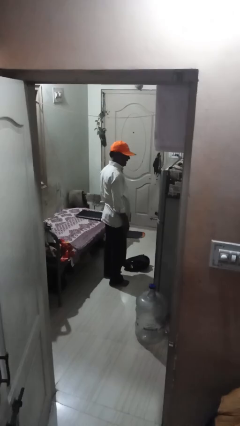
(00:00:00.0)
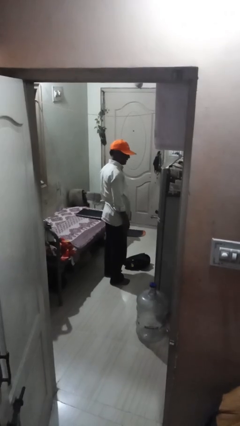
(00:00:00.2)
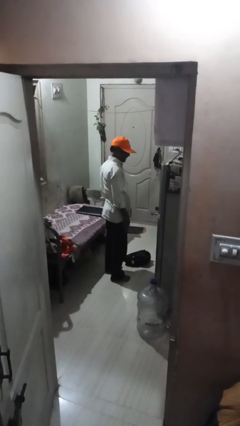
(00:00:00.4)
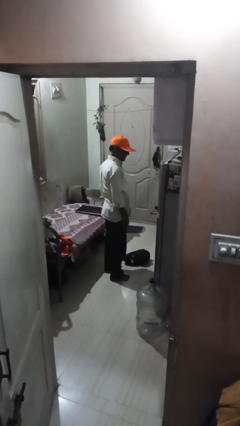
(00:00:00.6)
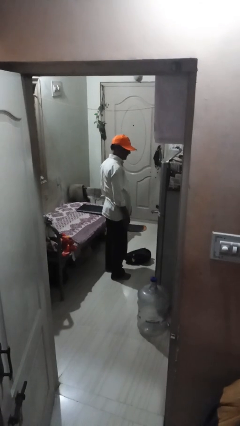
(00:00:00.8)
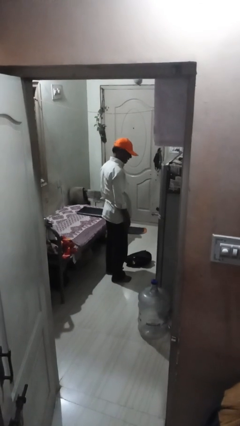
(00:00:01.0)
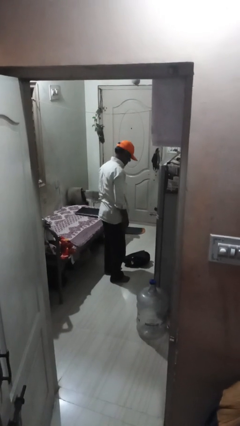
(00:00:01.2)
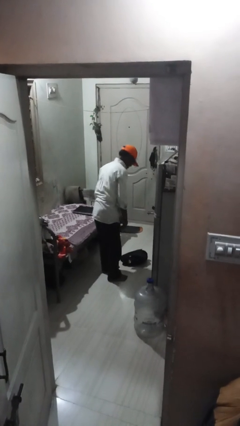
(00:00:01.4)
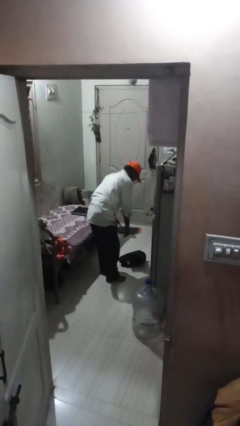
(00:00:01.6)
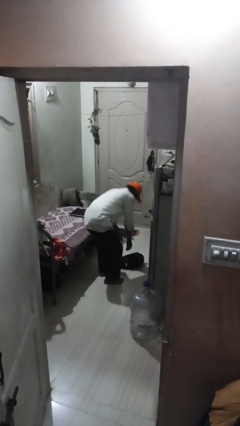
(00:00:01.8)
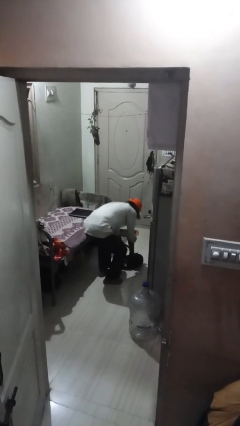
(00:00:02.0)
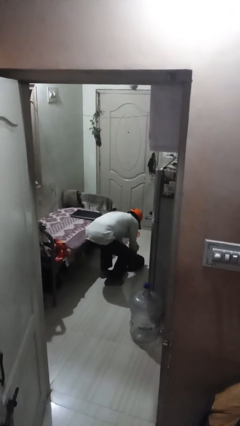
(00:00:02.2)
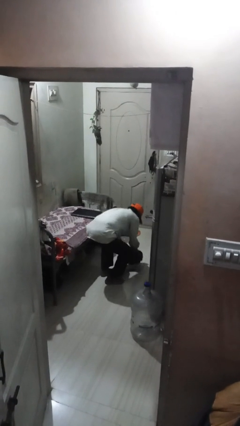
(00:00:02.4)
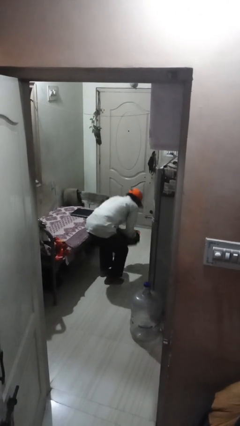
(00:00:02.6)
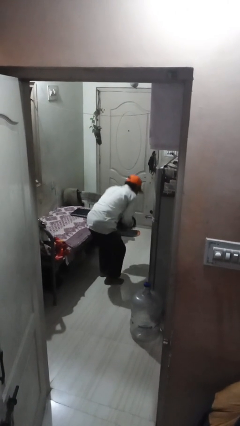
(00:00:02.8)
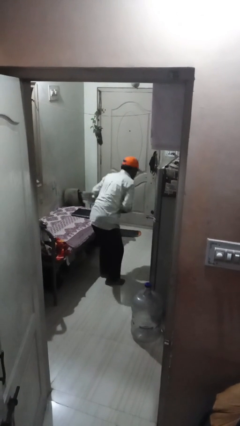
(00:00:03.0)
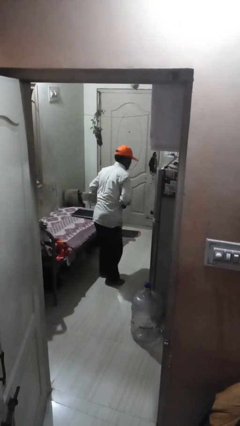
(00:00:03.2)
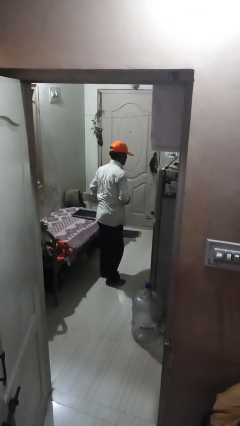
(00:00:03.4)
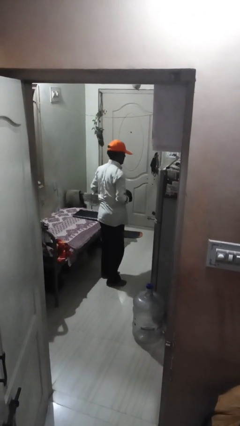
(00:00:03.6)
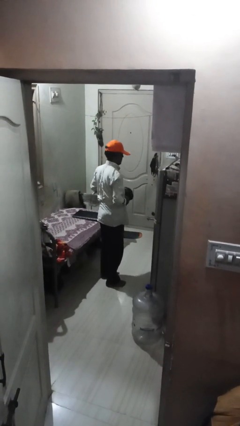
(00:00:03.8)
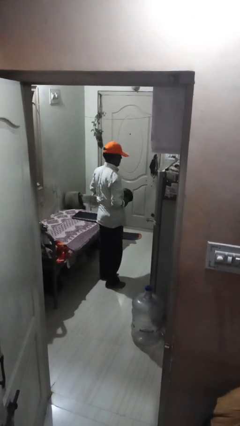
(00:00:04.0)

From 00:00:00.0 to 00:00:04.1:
person picks up object from floor

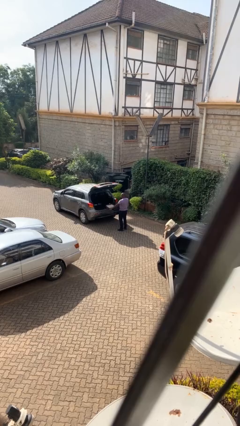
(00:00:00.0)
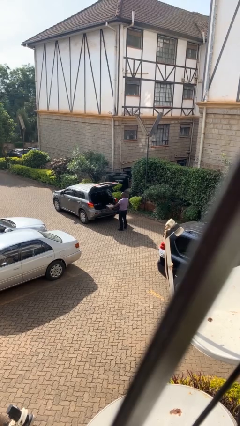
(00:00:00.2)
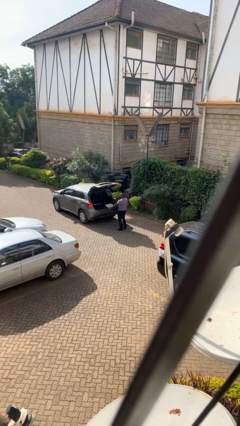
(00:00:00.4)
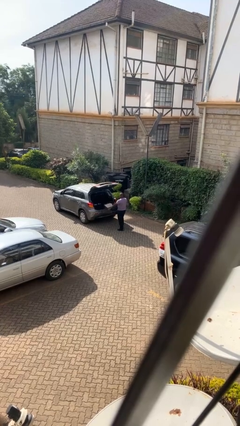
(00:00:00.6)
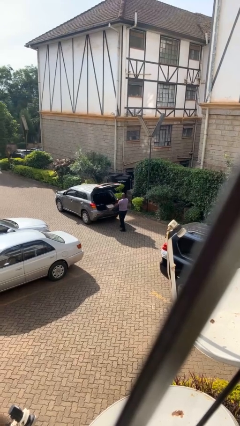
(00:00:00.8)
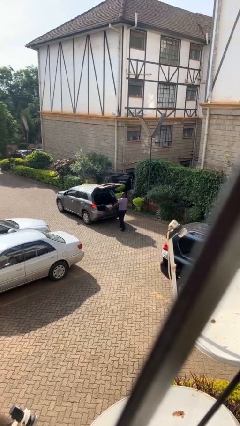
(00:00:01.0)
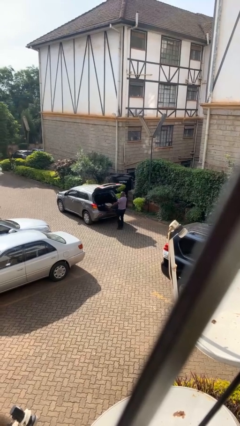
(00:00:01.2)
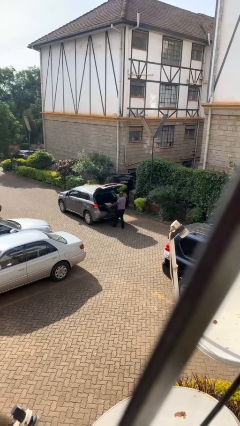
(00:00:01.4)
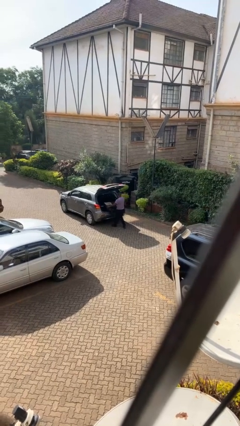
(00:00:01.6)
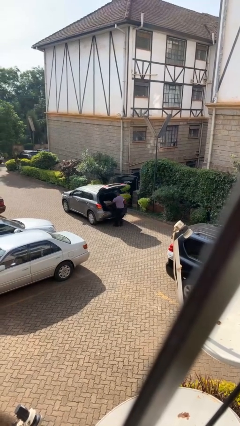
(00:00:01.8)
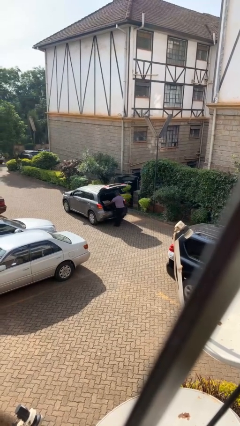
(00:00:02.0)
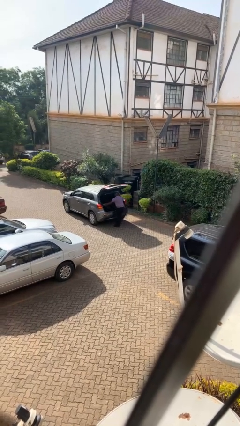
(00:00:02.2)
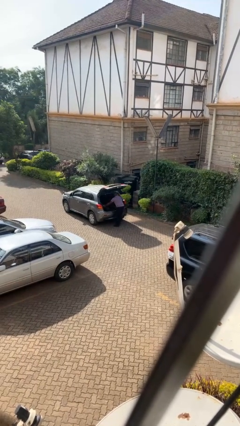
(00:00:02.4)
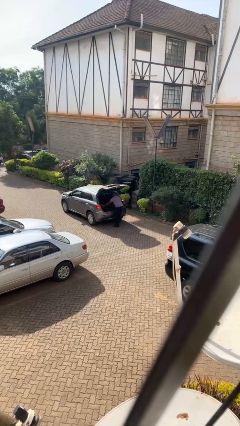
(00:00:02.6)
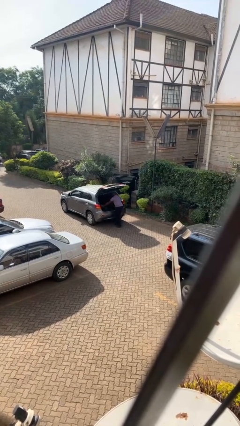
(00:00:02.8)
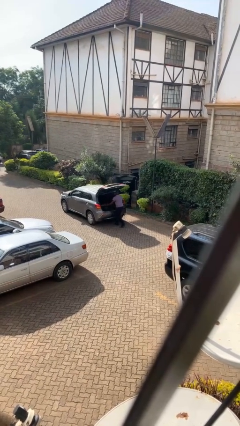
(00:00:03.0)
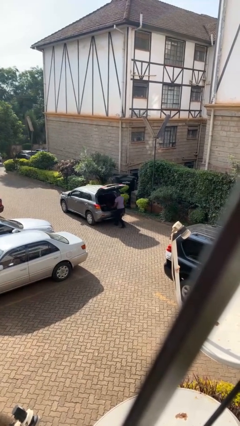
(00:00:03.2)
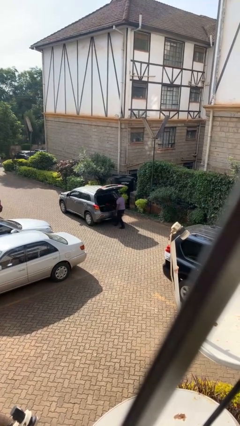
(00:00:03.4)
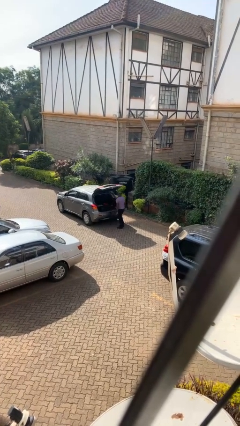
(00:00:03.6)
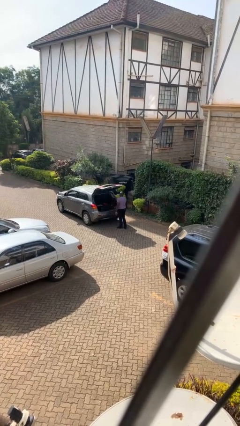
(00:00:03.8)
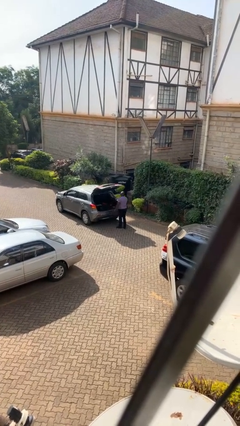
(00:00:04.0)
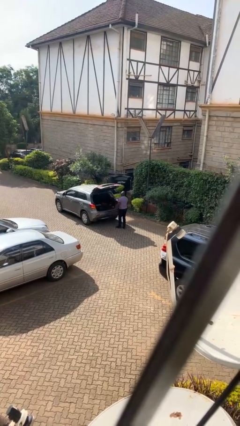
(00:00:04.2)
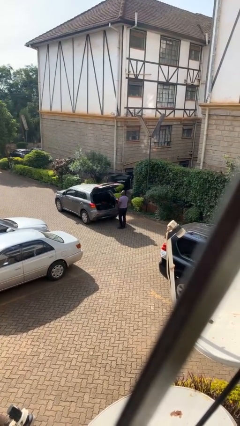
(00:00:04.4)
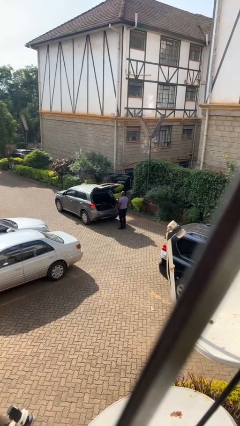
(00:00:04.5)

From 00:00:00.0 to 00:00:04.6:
person loads car

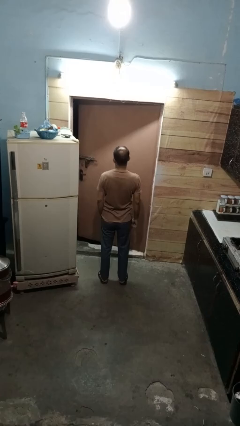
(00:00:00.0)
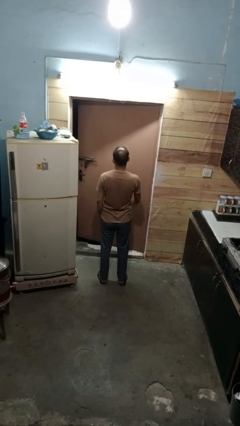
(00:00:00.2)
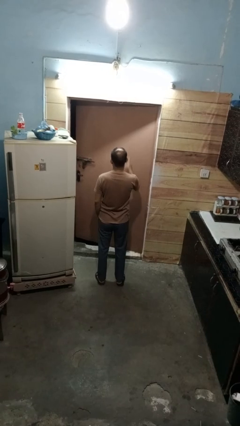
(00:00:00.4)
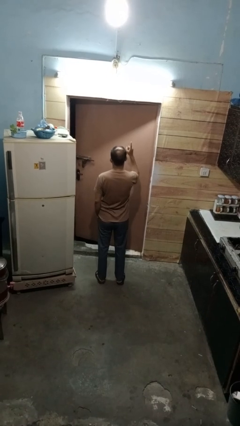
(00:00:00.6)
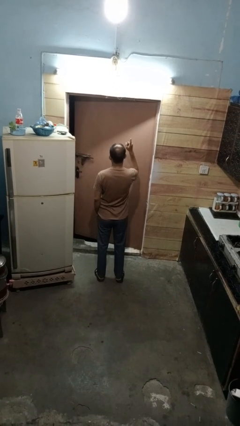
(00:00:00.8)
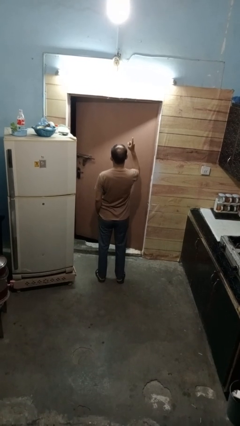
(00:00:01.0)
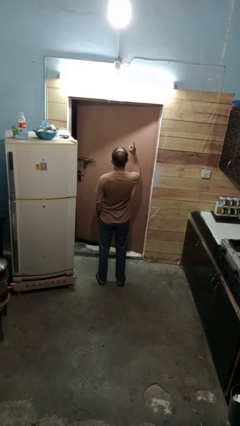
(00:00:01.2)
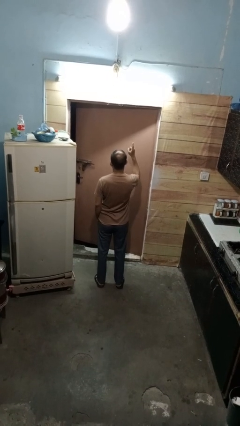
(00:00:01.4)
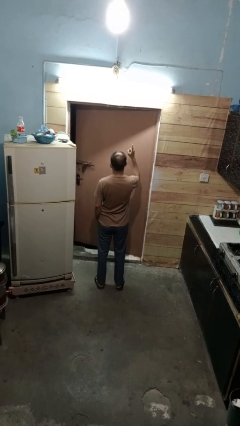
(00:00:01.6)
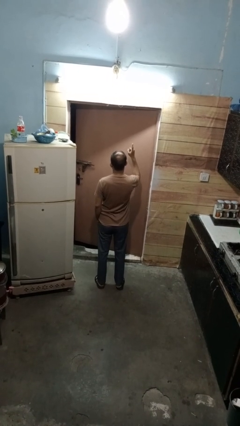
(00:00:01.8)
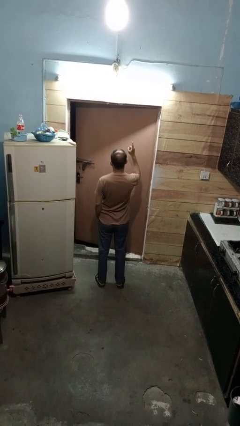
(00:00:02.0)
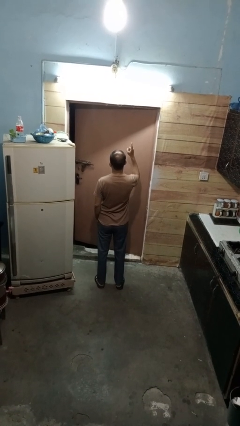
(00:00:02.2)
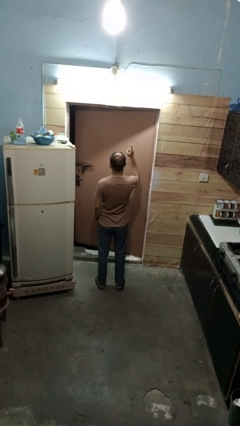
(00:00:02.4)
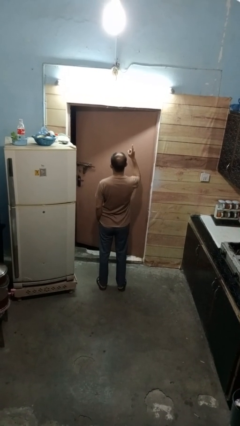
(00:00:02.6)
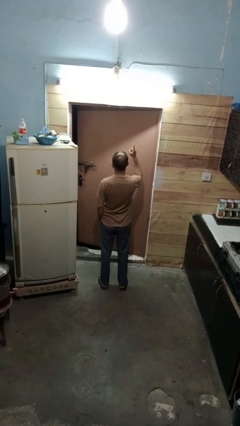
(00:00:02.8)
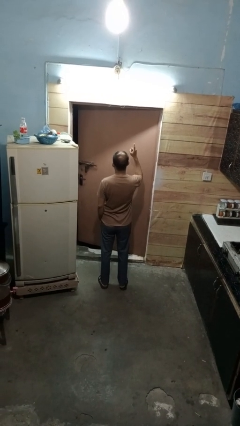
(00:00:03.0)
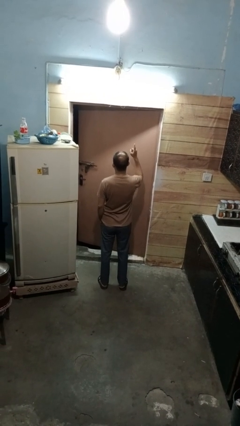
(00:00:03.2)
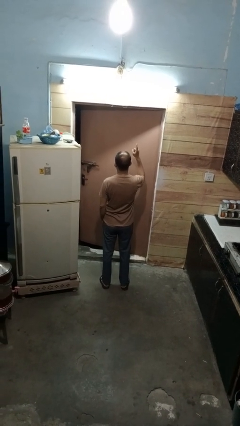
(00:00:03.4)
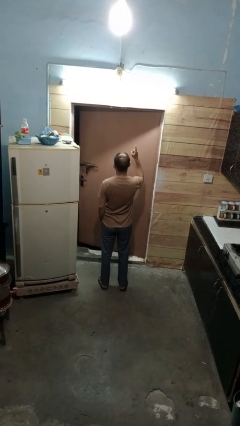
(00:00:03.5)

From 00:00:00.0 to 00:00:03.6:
person gestures number one

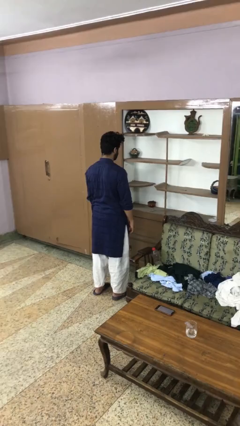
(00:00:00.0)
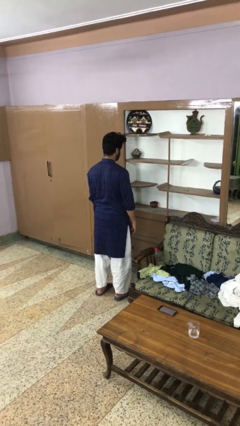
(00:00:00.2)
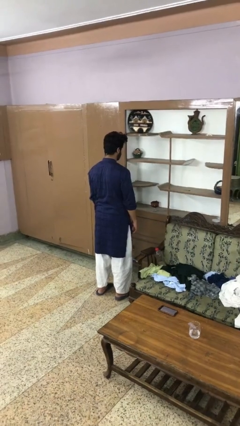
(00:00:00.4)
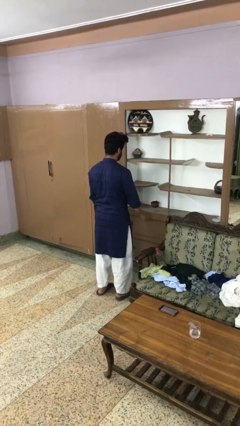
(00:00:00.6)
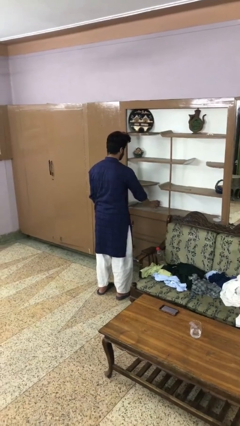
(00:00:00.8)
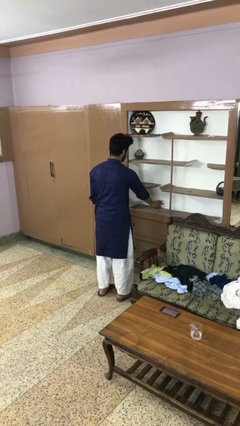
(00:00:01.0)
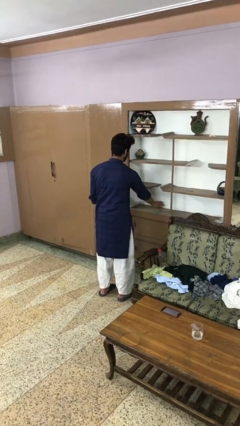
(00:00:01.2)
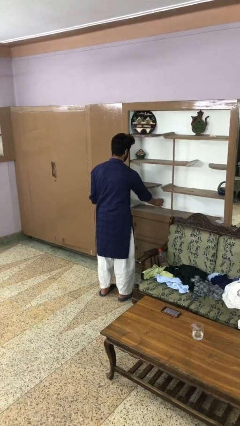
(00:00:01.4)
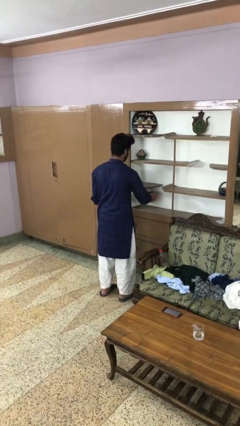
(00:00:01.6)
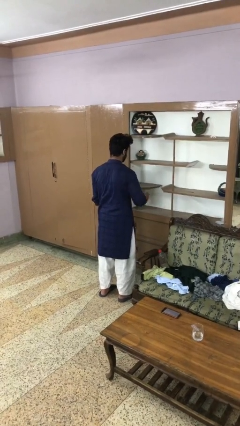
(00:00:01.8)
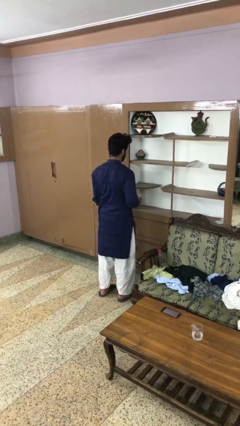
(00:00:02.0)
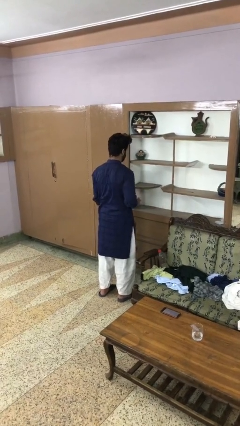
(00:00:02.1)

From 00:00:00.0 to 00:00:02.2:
person picks up object from shelf

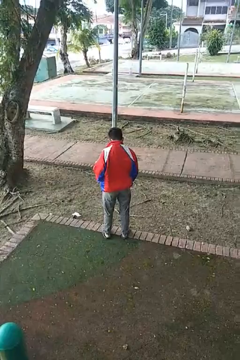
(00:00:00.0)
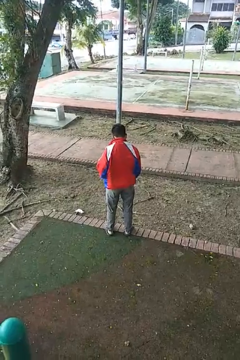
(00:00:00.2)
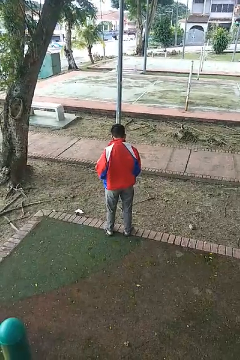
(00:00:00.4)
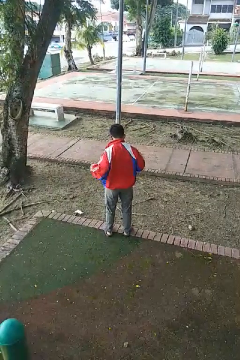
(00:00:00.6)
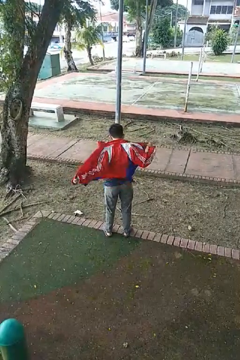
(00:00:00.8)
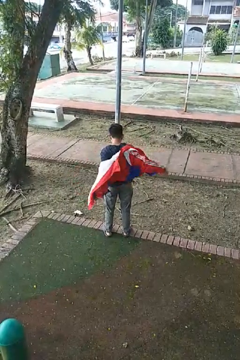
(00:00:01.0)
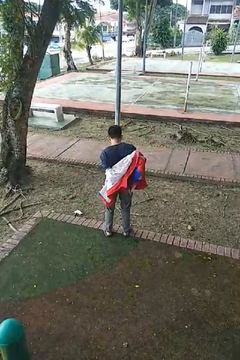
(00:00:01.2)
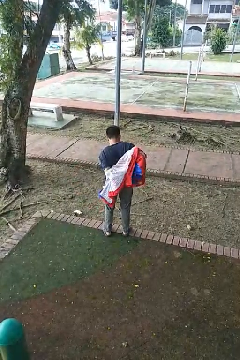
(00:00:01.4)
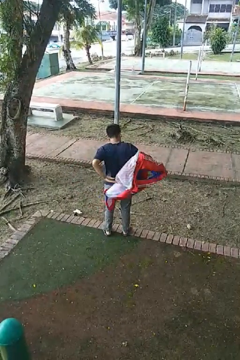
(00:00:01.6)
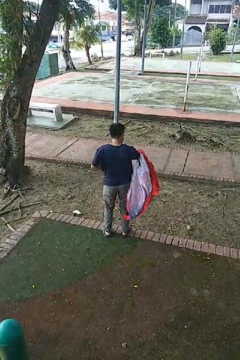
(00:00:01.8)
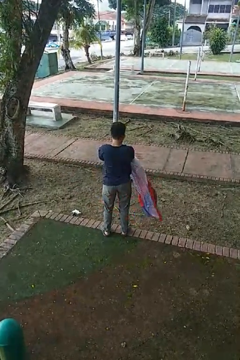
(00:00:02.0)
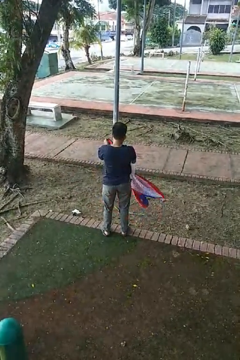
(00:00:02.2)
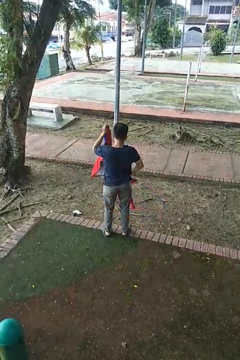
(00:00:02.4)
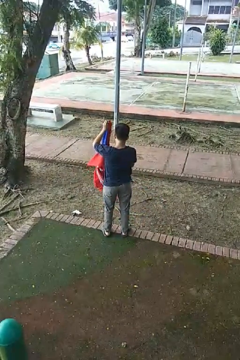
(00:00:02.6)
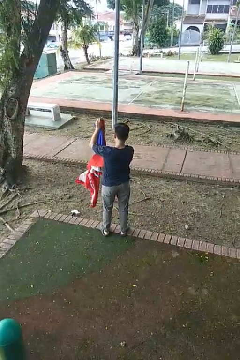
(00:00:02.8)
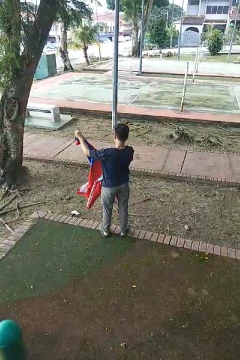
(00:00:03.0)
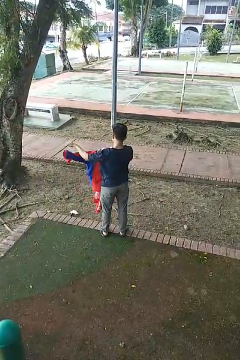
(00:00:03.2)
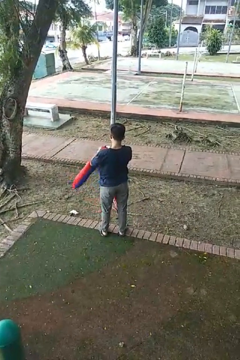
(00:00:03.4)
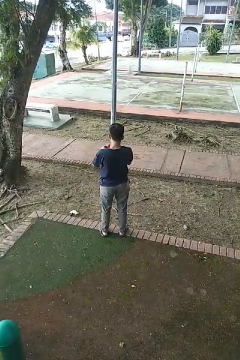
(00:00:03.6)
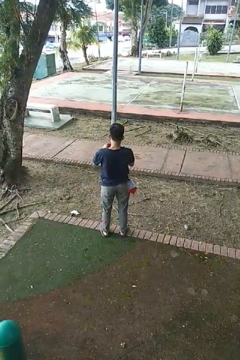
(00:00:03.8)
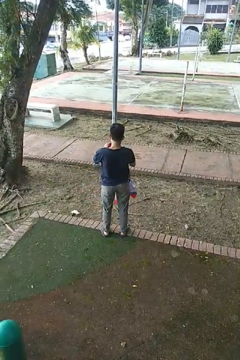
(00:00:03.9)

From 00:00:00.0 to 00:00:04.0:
person takes off jacket
